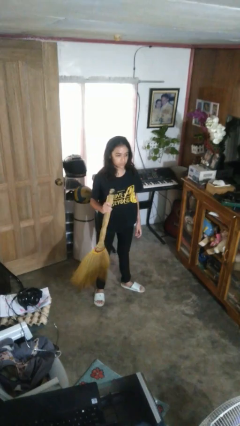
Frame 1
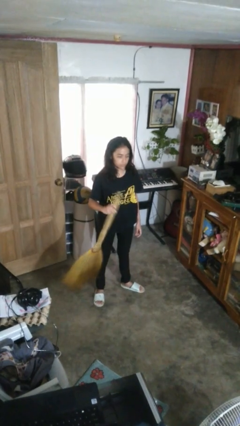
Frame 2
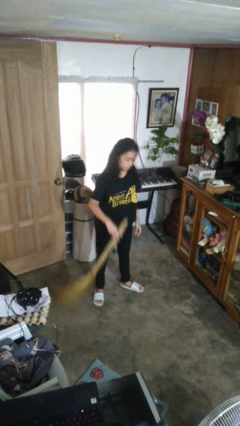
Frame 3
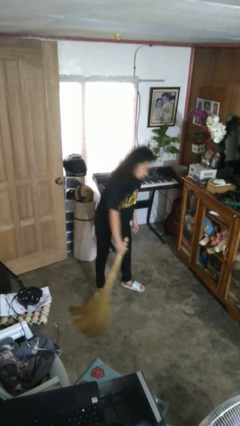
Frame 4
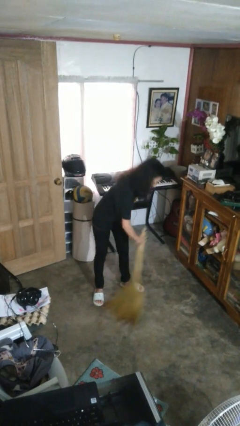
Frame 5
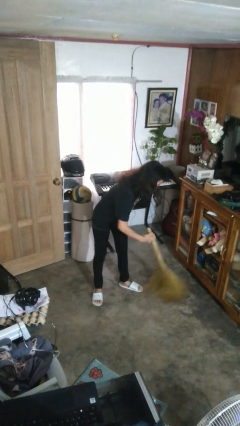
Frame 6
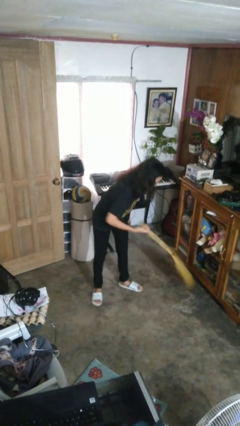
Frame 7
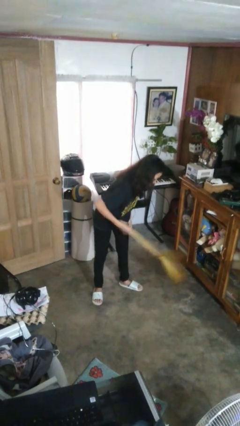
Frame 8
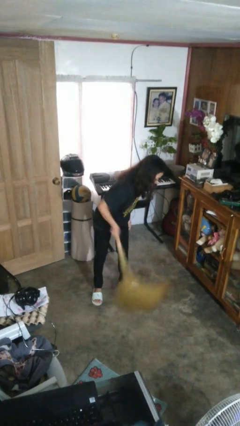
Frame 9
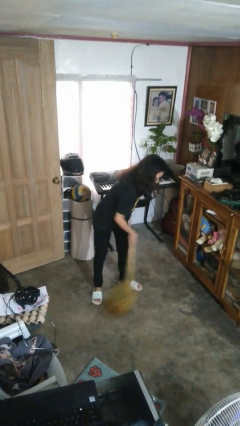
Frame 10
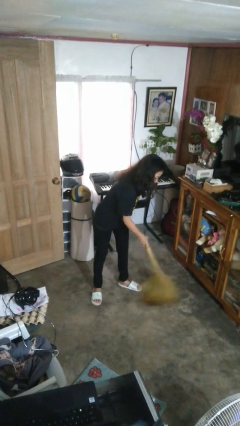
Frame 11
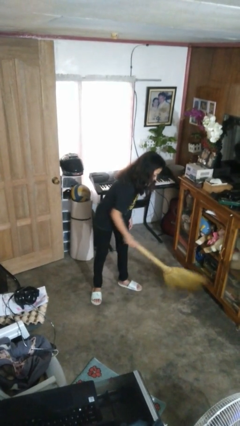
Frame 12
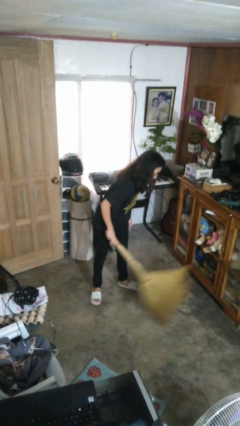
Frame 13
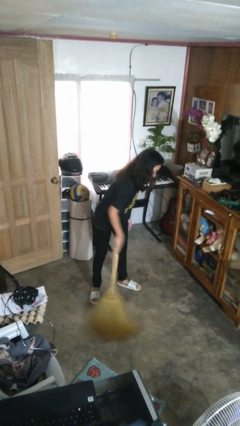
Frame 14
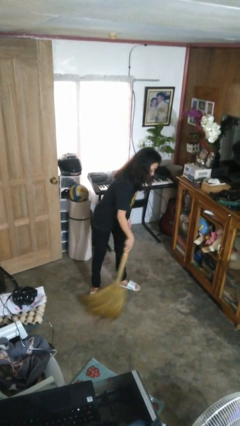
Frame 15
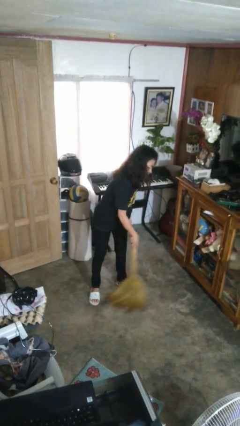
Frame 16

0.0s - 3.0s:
person sweeps floor

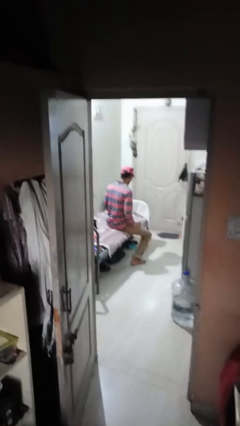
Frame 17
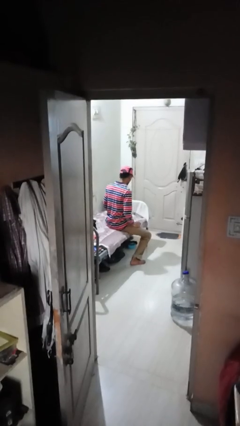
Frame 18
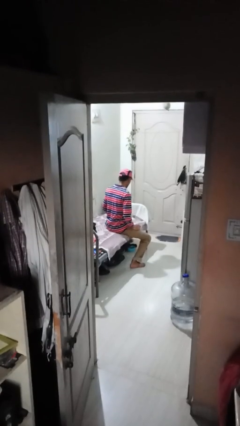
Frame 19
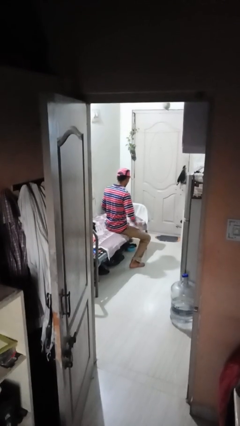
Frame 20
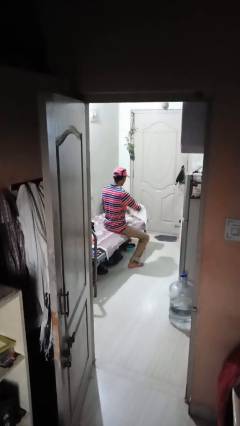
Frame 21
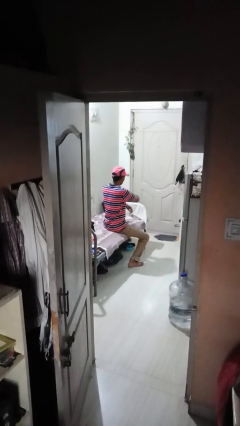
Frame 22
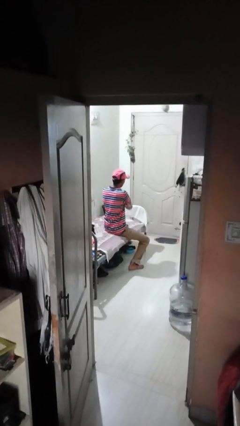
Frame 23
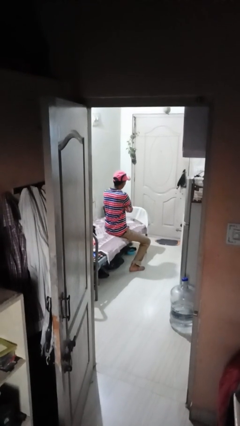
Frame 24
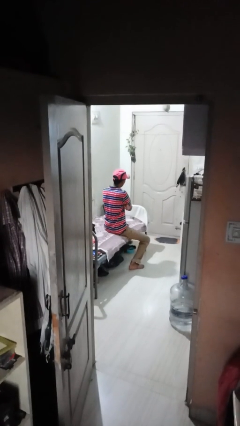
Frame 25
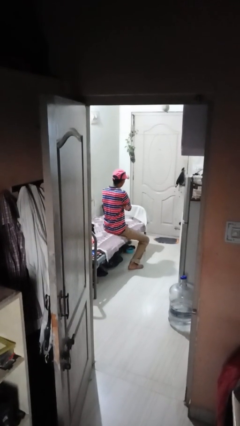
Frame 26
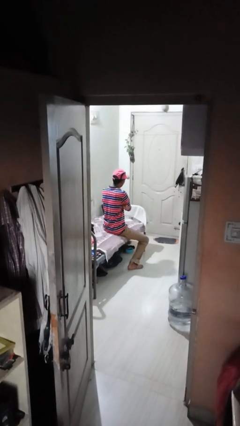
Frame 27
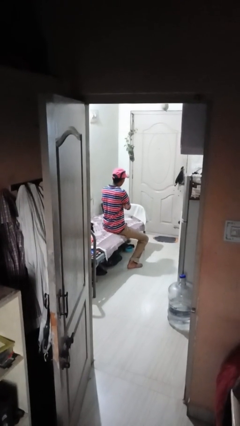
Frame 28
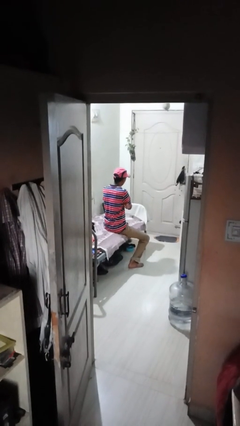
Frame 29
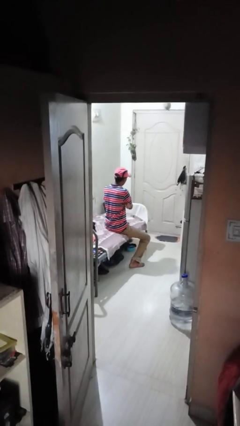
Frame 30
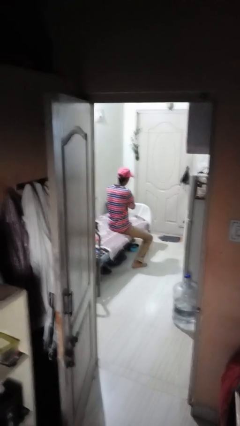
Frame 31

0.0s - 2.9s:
person crosses arms

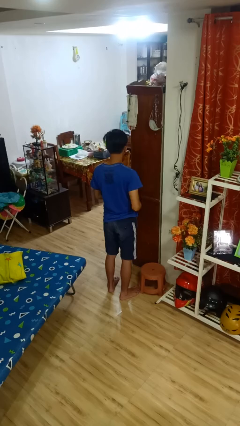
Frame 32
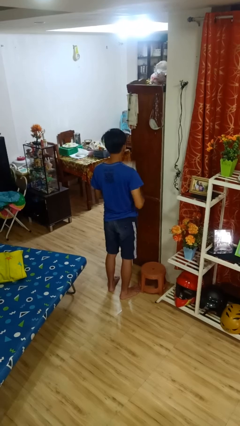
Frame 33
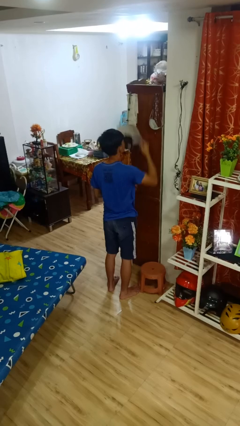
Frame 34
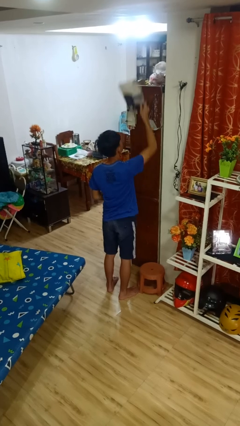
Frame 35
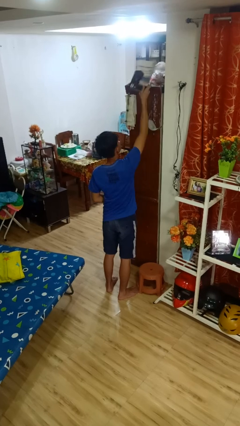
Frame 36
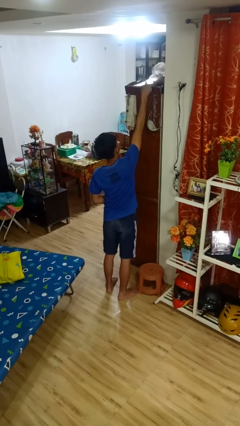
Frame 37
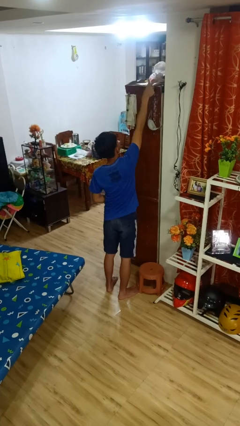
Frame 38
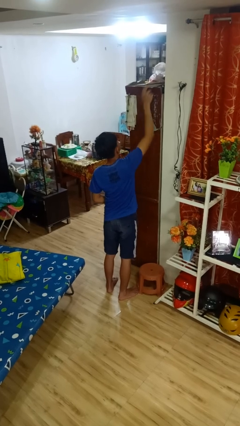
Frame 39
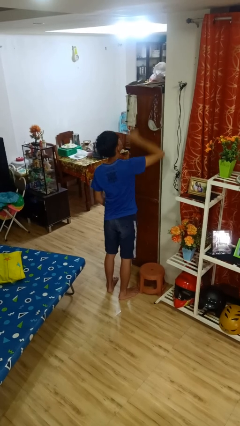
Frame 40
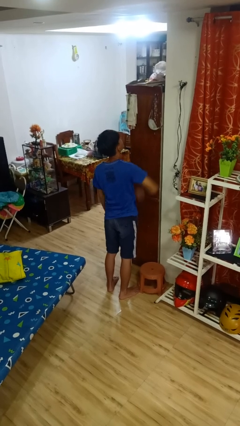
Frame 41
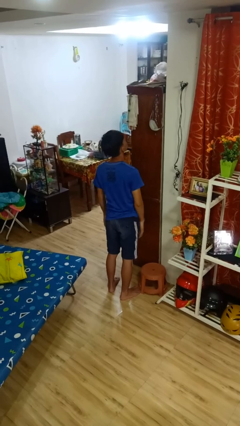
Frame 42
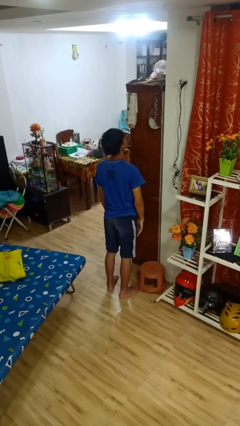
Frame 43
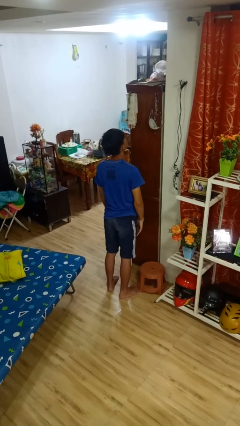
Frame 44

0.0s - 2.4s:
person puts down object on shelf

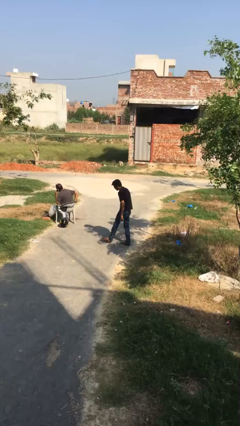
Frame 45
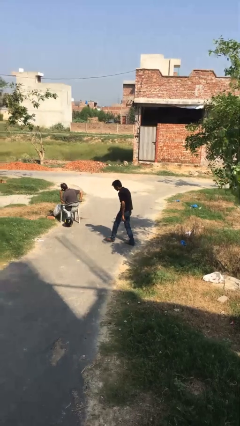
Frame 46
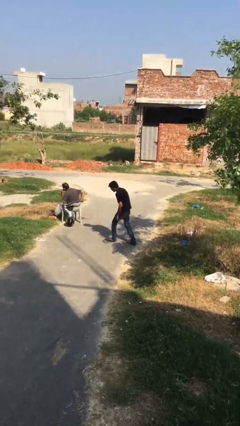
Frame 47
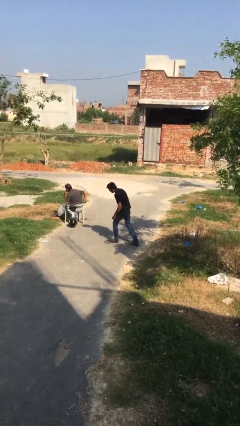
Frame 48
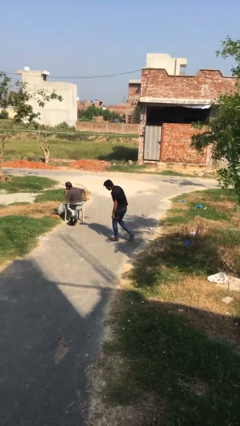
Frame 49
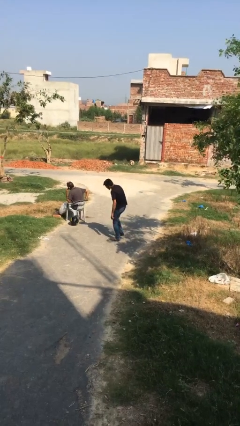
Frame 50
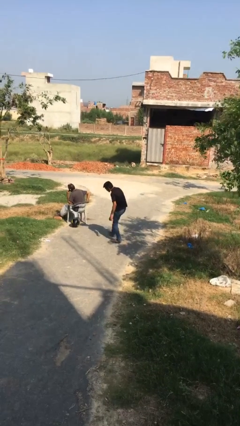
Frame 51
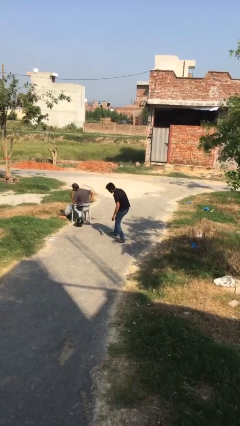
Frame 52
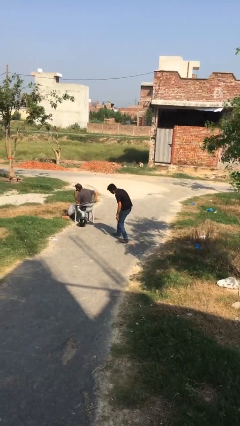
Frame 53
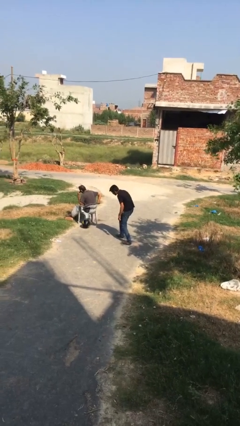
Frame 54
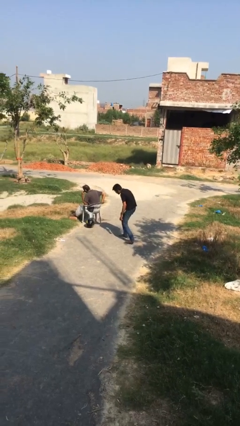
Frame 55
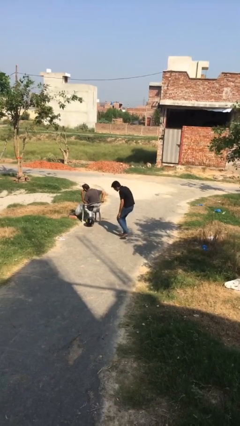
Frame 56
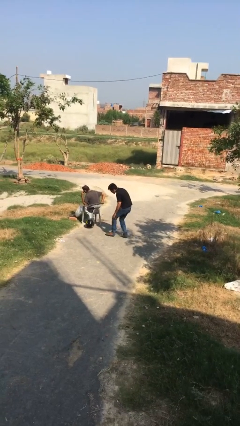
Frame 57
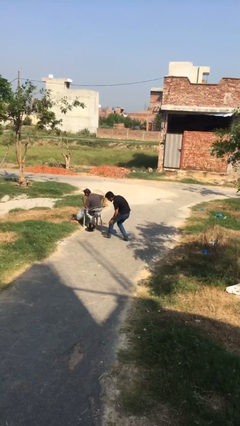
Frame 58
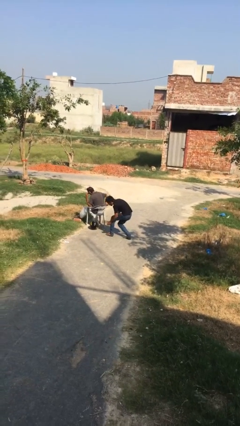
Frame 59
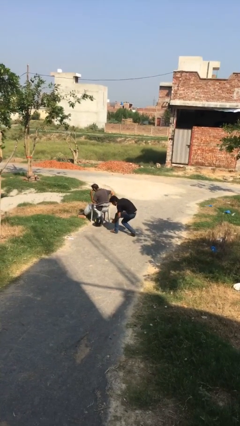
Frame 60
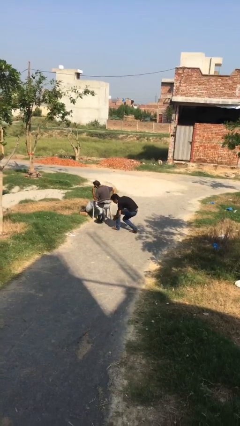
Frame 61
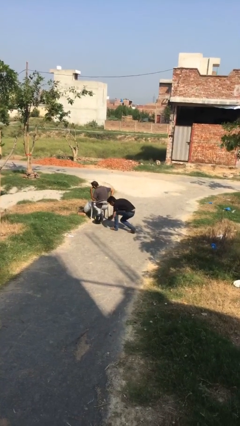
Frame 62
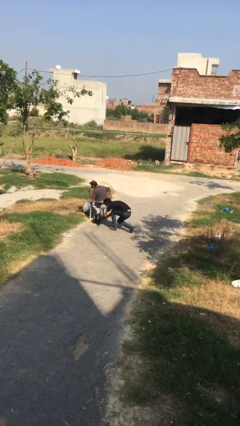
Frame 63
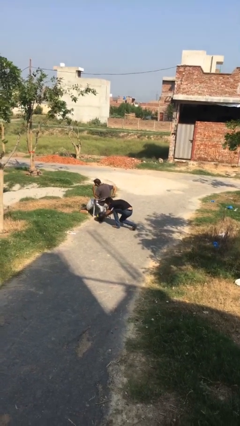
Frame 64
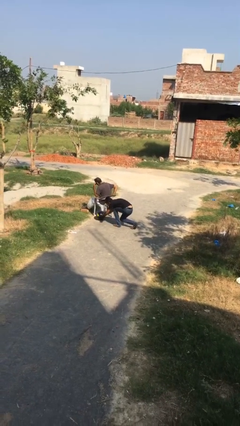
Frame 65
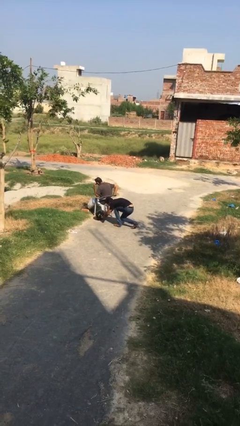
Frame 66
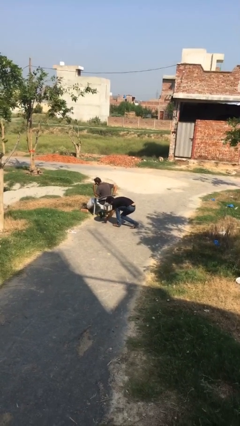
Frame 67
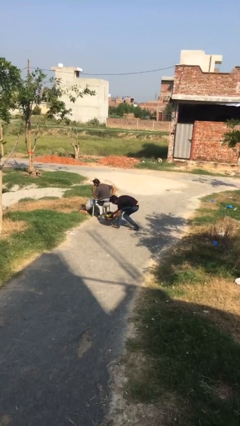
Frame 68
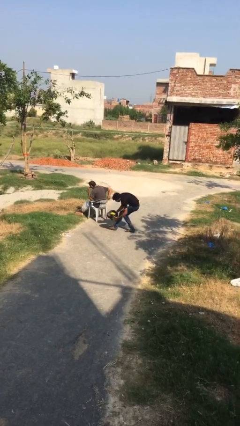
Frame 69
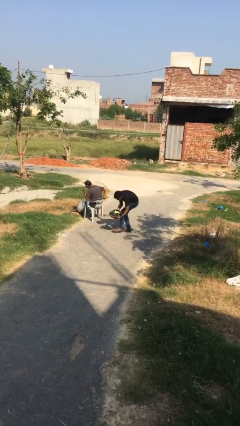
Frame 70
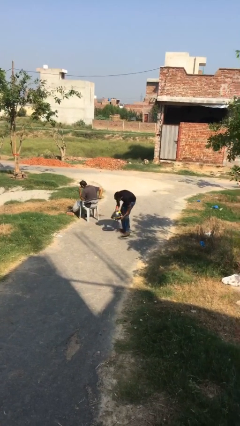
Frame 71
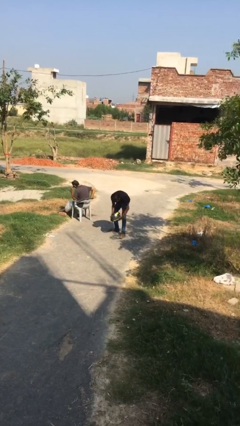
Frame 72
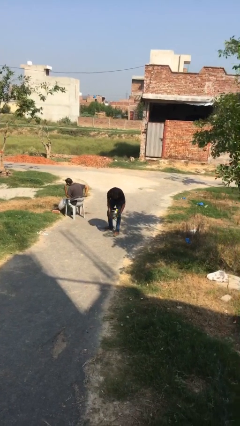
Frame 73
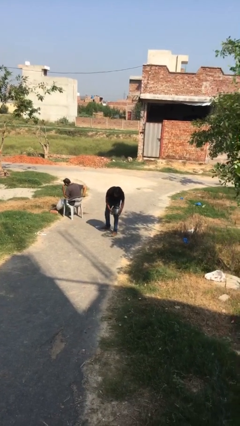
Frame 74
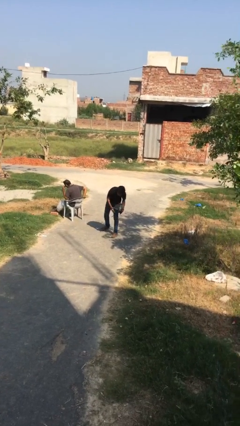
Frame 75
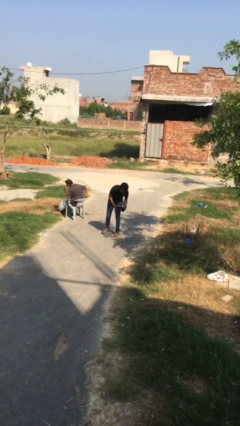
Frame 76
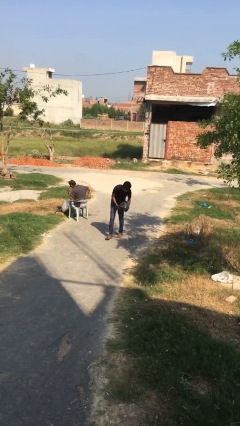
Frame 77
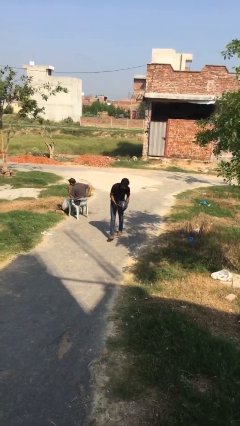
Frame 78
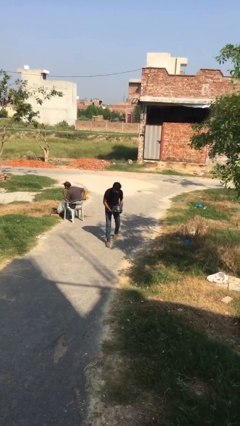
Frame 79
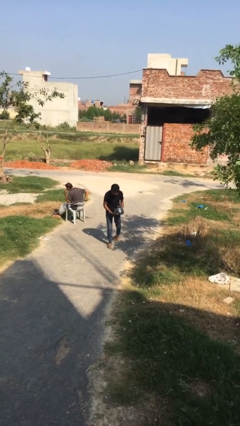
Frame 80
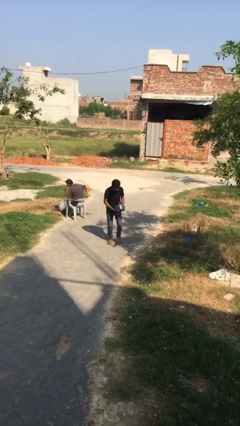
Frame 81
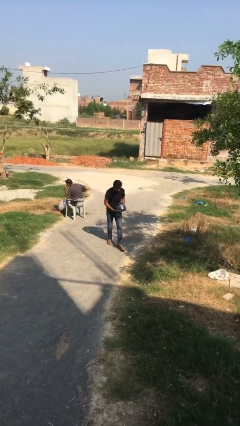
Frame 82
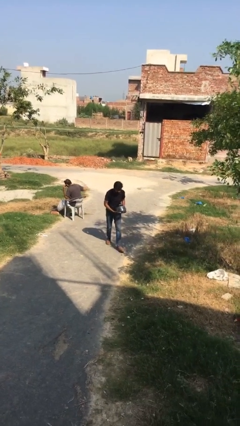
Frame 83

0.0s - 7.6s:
person steals object from person

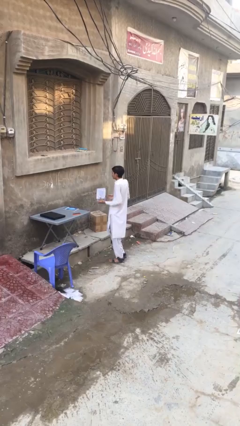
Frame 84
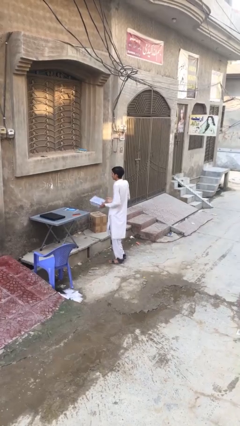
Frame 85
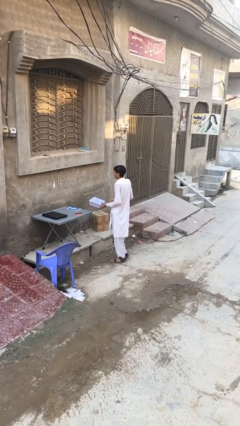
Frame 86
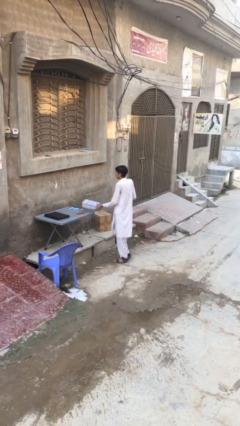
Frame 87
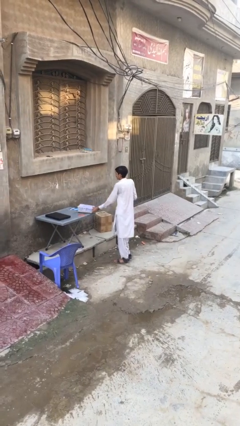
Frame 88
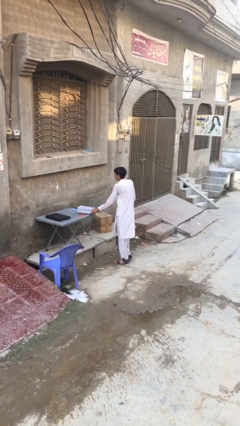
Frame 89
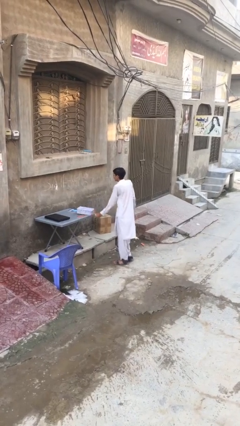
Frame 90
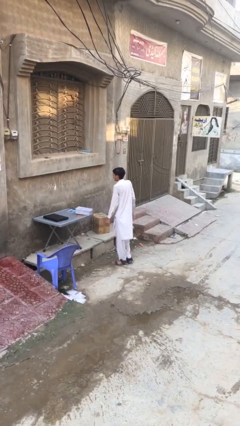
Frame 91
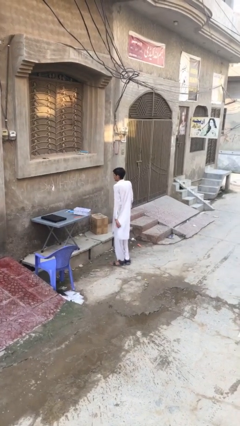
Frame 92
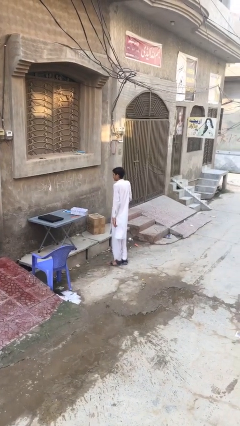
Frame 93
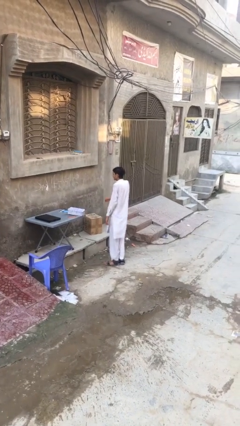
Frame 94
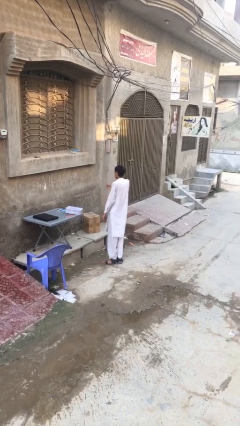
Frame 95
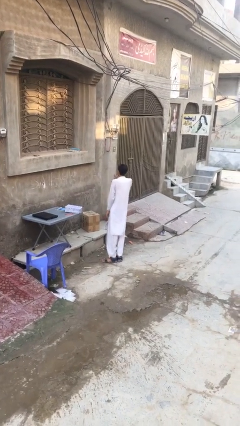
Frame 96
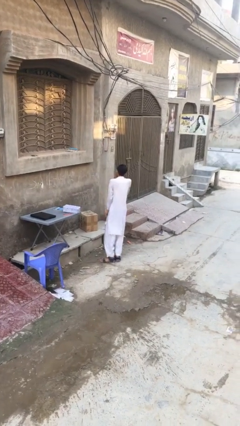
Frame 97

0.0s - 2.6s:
person puts down object on table
